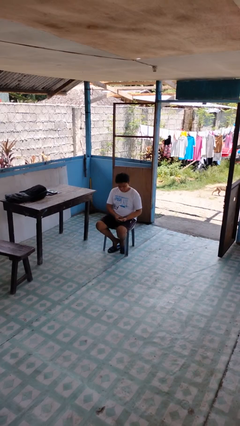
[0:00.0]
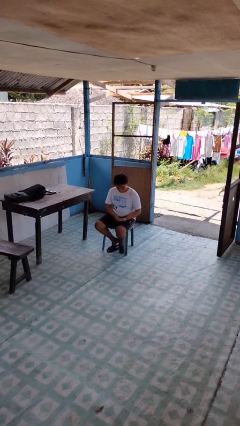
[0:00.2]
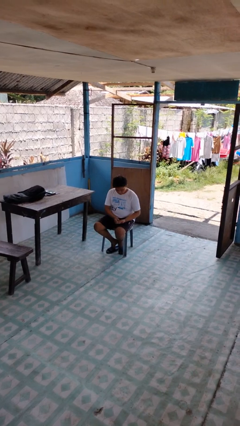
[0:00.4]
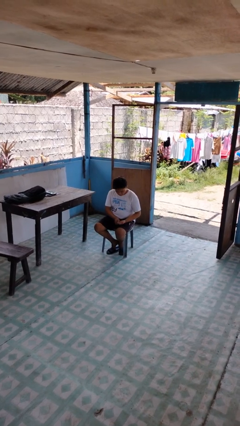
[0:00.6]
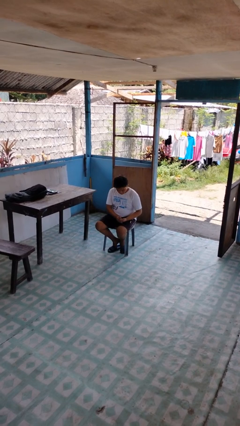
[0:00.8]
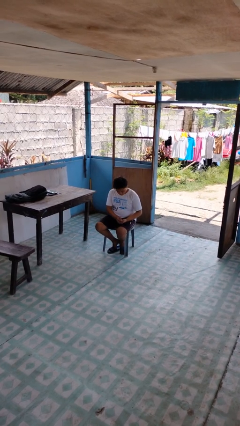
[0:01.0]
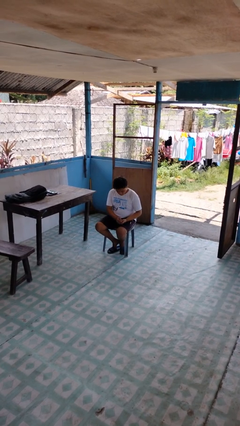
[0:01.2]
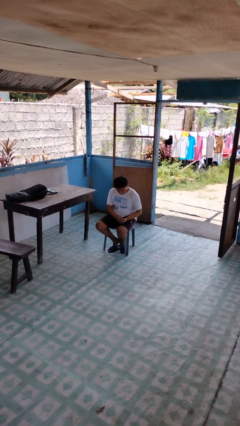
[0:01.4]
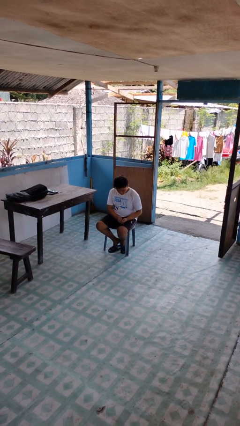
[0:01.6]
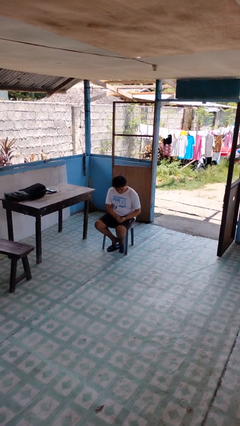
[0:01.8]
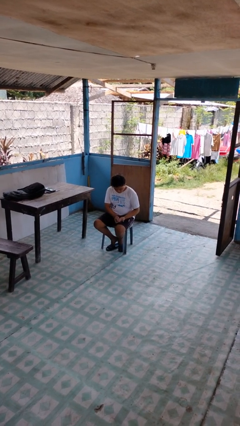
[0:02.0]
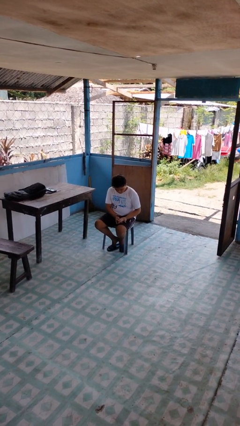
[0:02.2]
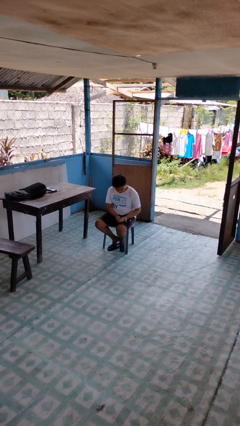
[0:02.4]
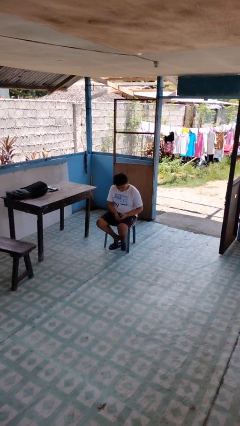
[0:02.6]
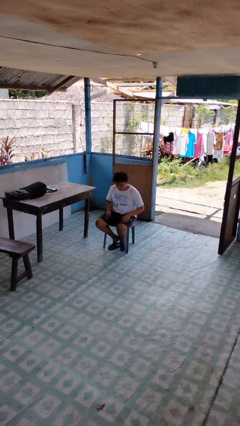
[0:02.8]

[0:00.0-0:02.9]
person looks at hands in lap

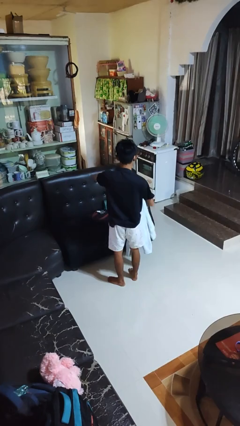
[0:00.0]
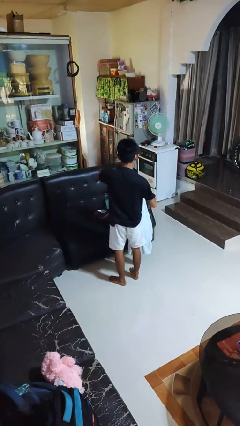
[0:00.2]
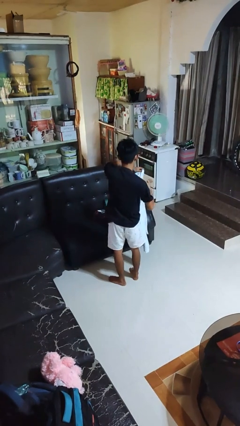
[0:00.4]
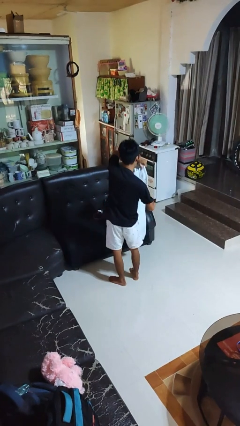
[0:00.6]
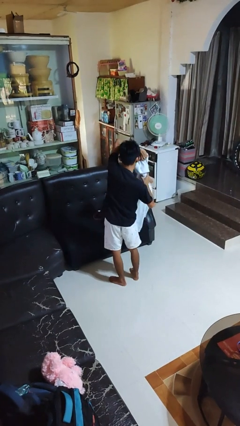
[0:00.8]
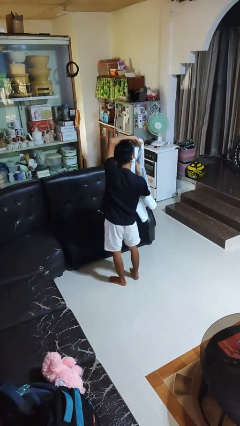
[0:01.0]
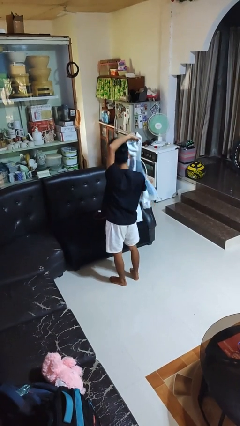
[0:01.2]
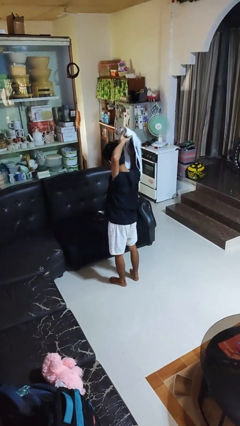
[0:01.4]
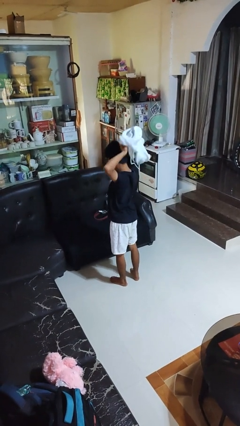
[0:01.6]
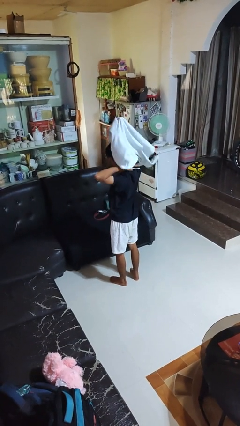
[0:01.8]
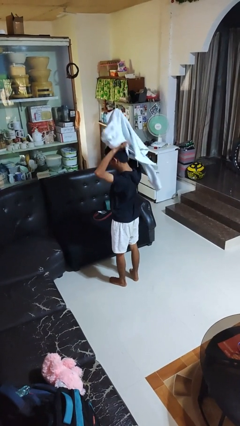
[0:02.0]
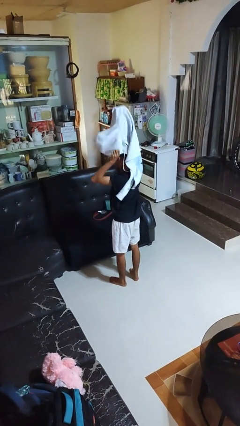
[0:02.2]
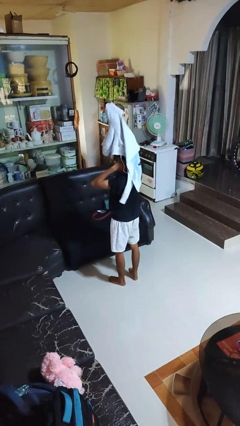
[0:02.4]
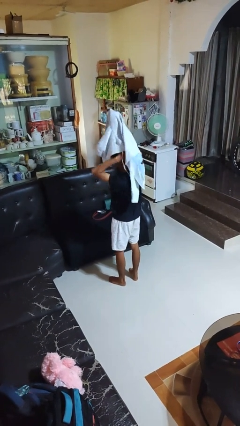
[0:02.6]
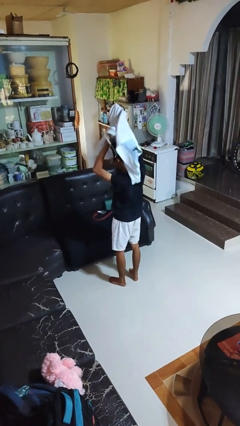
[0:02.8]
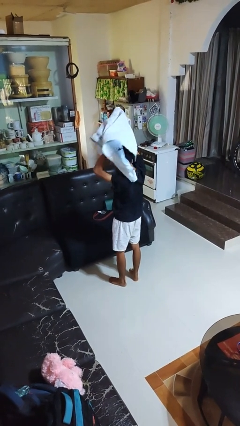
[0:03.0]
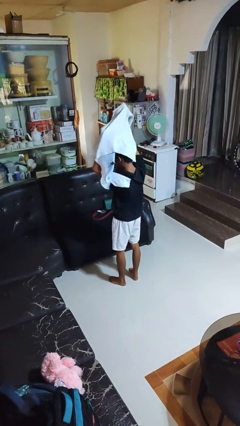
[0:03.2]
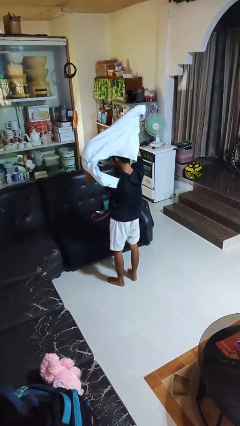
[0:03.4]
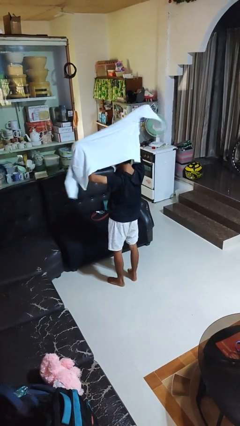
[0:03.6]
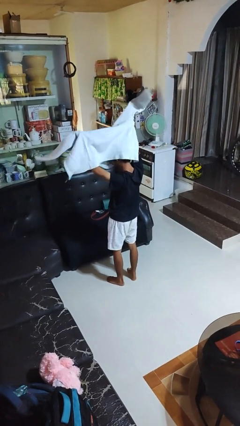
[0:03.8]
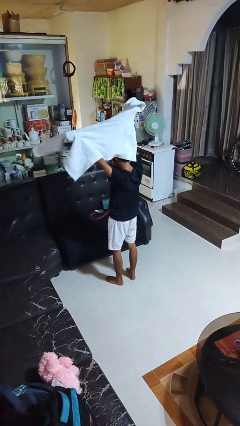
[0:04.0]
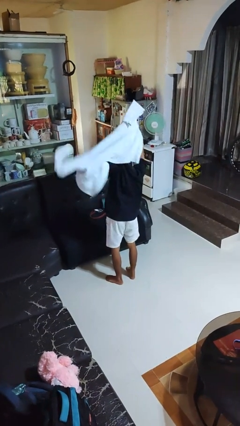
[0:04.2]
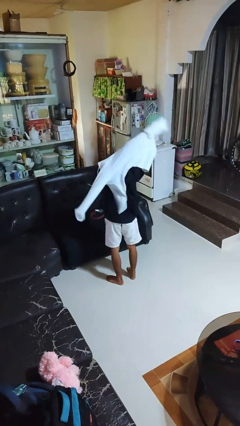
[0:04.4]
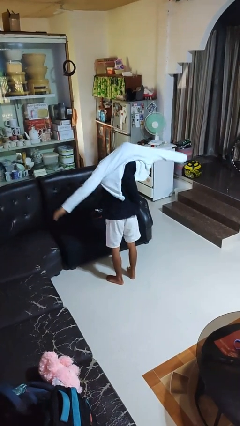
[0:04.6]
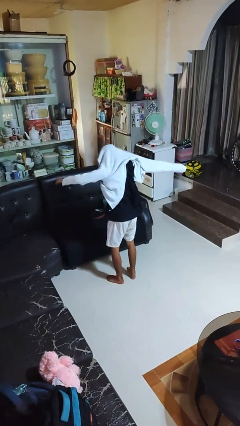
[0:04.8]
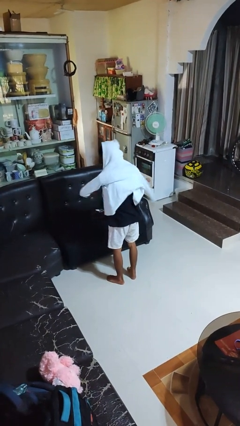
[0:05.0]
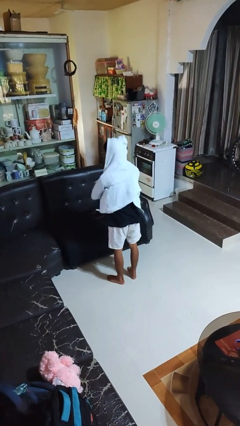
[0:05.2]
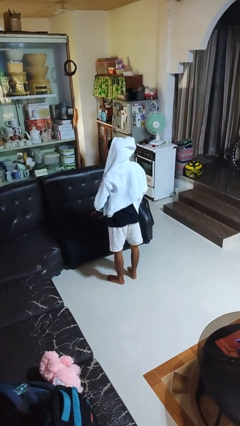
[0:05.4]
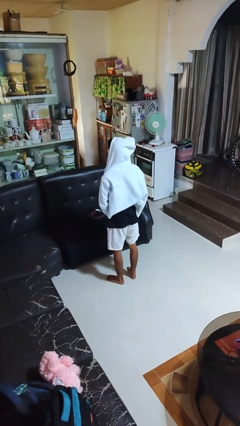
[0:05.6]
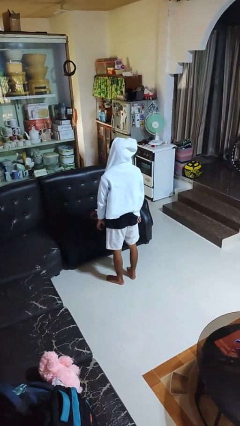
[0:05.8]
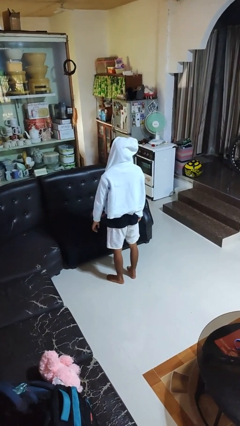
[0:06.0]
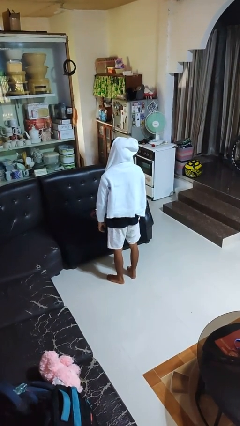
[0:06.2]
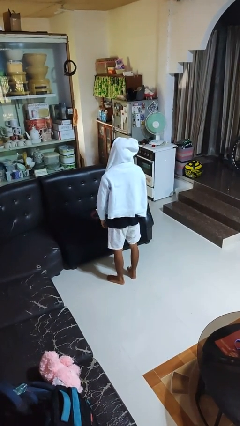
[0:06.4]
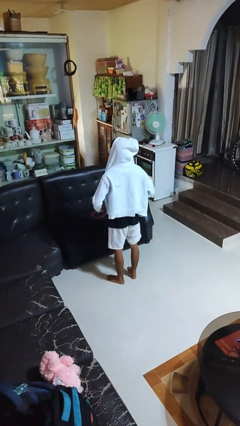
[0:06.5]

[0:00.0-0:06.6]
person puts on hoodie

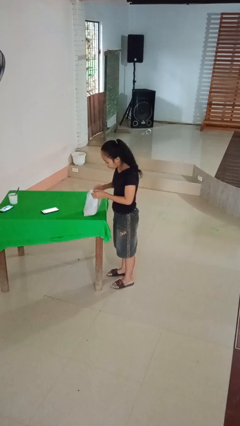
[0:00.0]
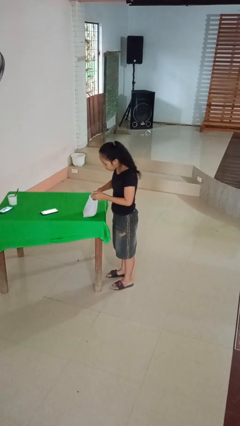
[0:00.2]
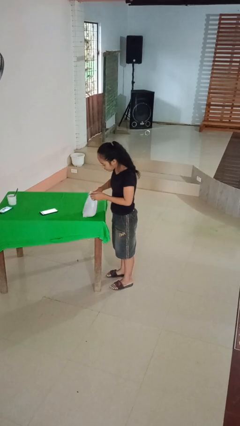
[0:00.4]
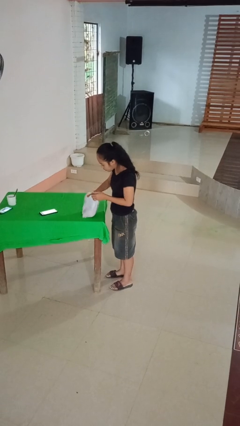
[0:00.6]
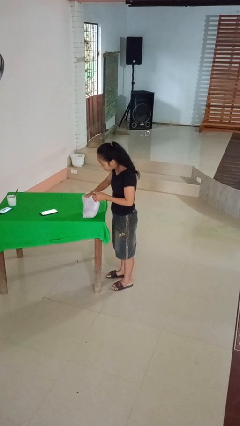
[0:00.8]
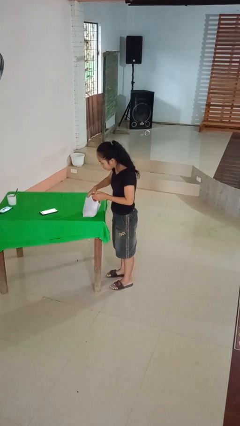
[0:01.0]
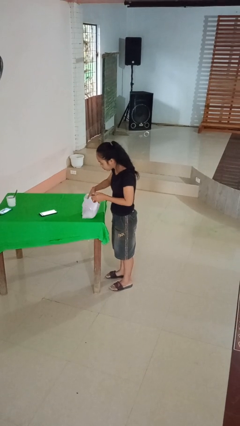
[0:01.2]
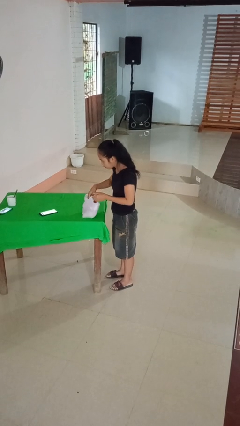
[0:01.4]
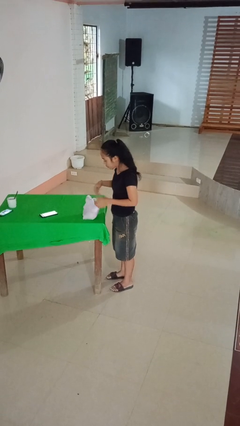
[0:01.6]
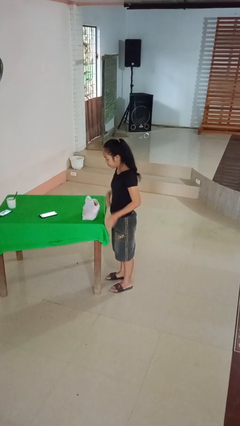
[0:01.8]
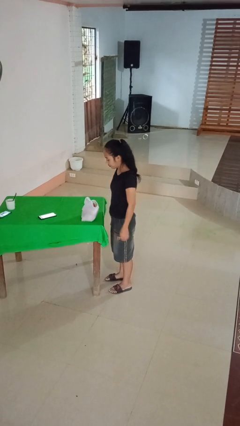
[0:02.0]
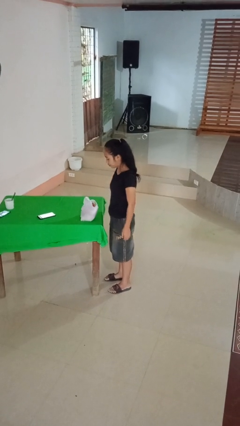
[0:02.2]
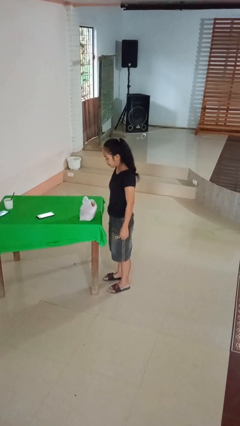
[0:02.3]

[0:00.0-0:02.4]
person searches in bag

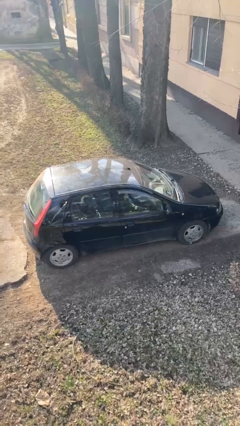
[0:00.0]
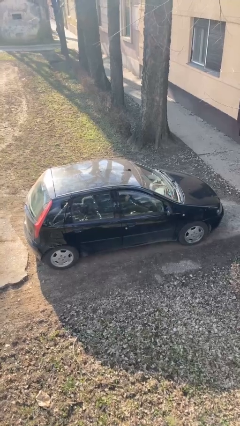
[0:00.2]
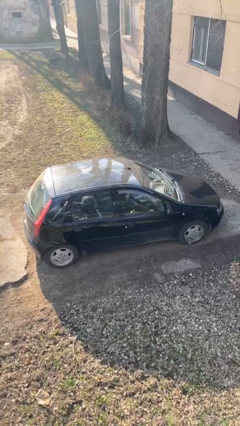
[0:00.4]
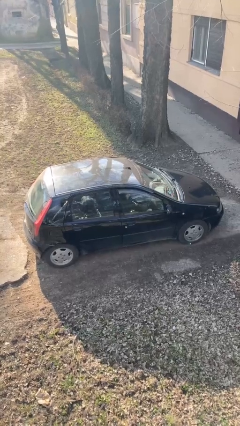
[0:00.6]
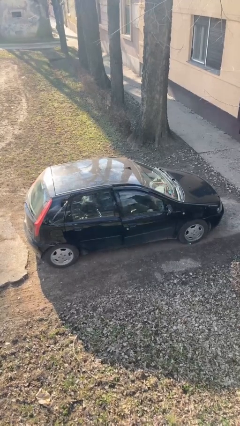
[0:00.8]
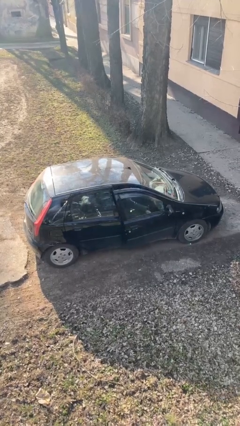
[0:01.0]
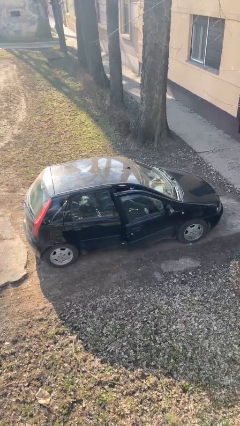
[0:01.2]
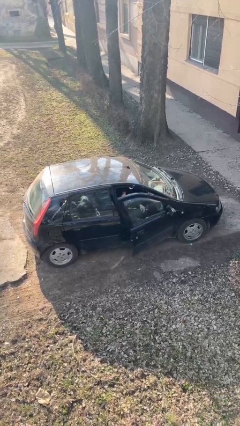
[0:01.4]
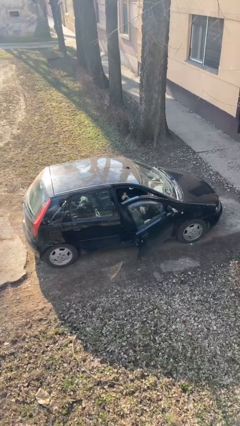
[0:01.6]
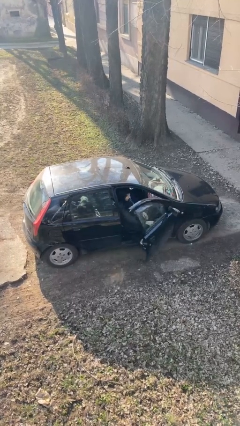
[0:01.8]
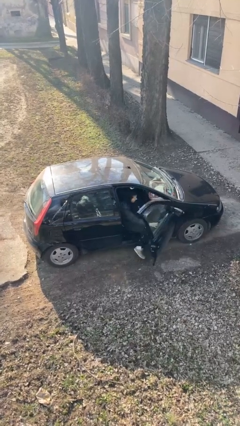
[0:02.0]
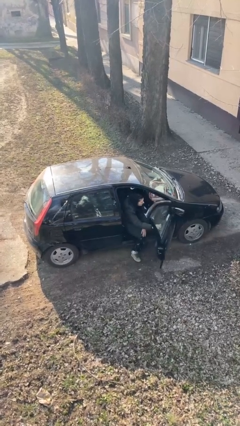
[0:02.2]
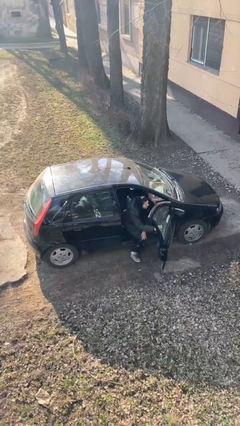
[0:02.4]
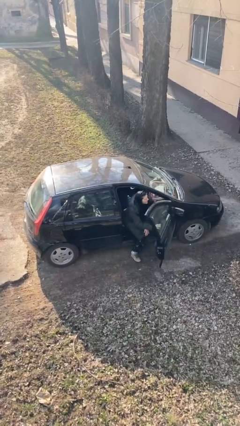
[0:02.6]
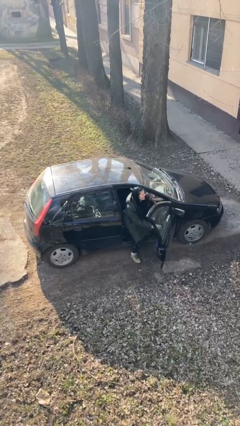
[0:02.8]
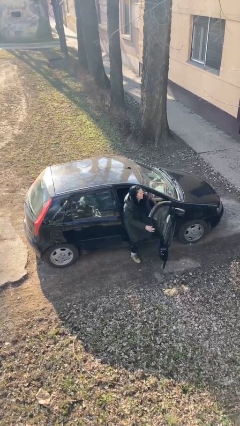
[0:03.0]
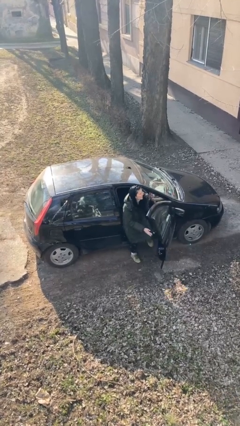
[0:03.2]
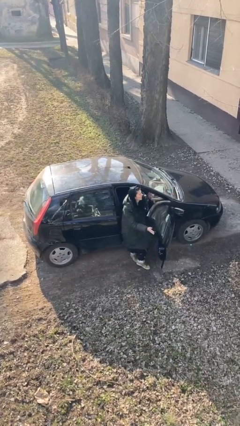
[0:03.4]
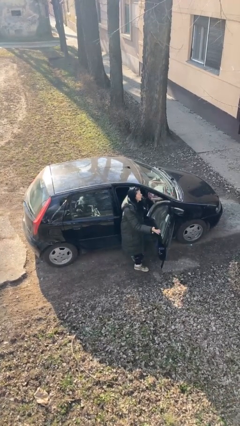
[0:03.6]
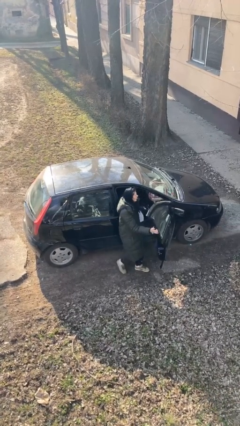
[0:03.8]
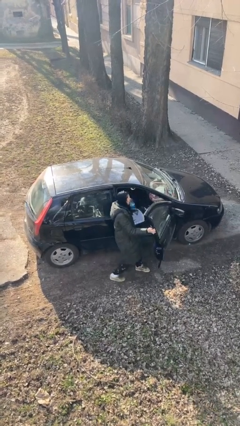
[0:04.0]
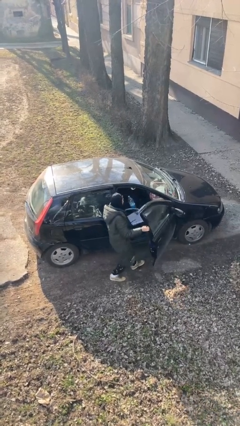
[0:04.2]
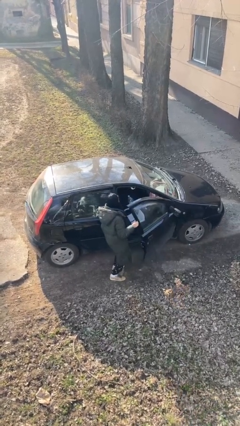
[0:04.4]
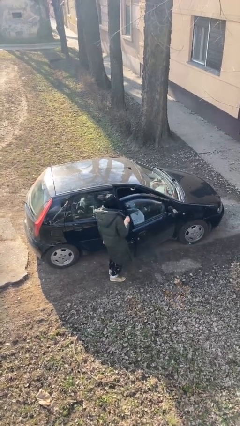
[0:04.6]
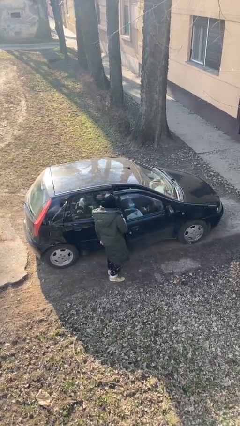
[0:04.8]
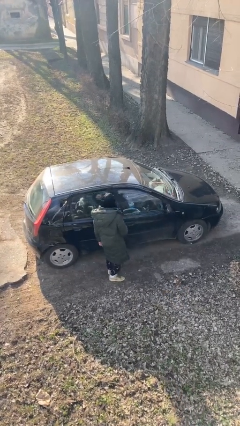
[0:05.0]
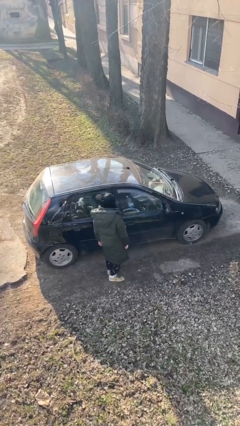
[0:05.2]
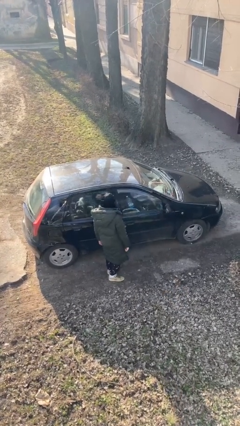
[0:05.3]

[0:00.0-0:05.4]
car drops off person

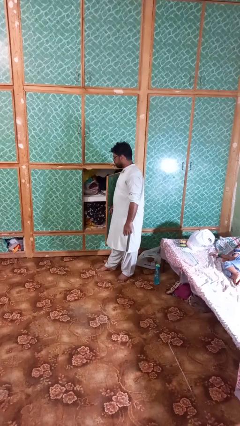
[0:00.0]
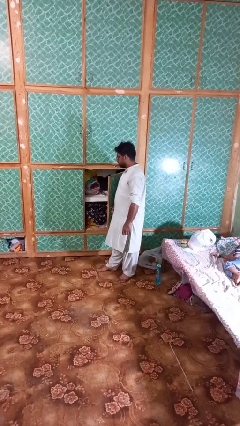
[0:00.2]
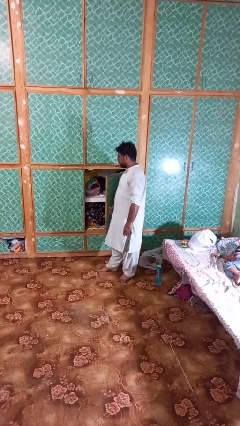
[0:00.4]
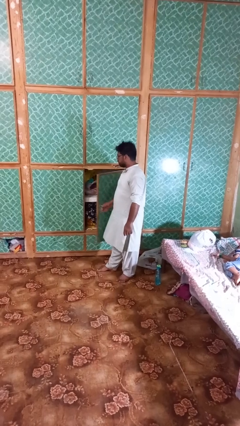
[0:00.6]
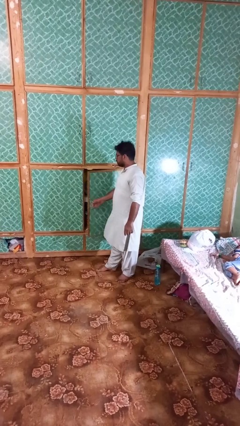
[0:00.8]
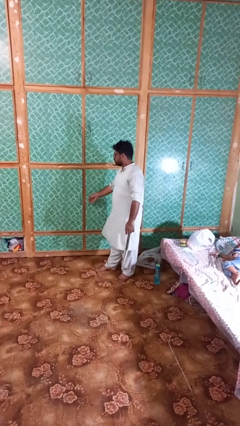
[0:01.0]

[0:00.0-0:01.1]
person closes closet door
